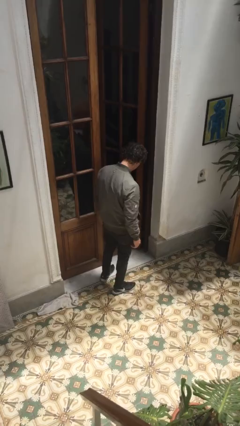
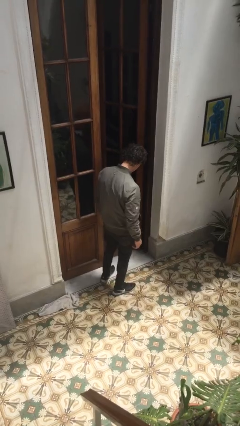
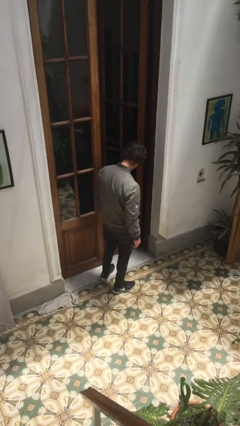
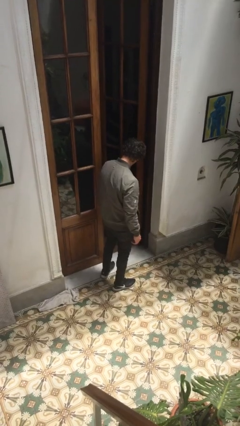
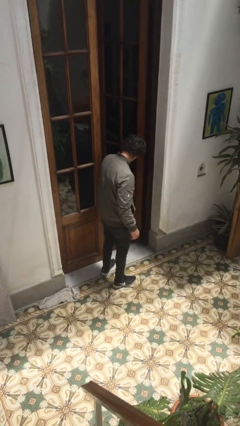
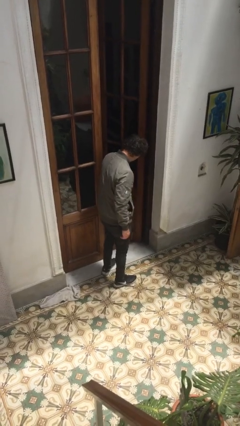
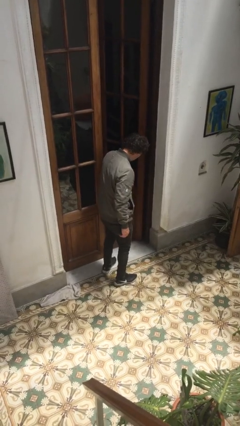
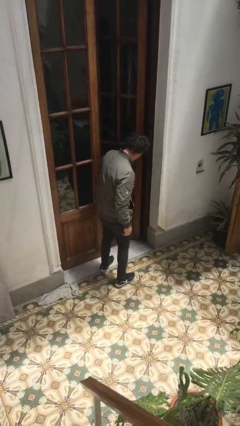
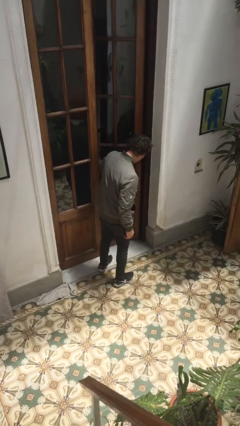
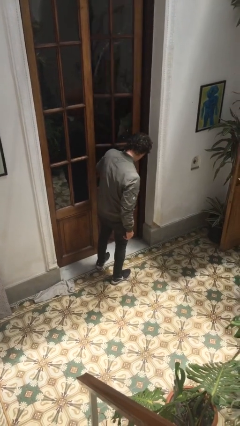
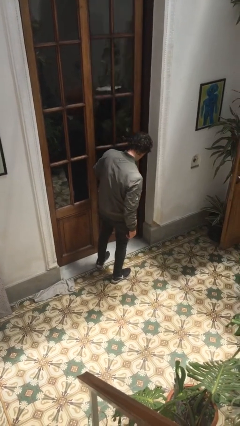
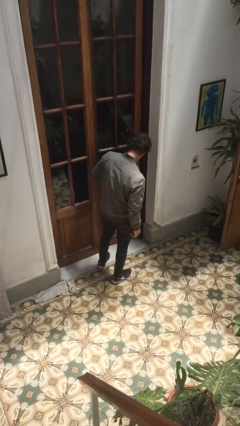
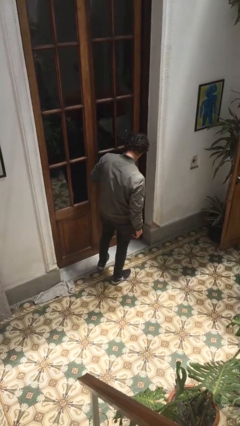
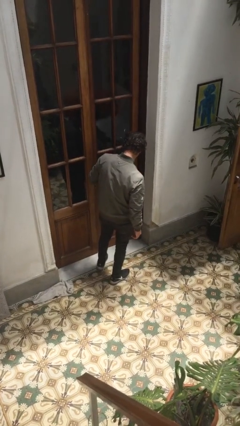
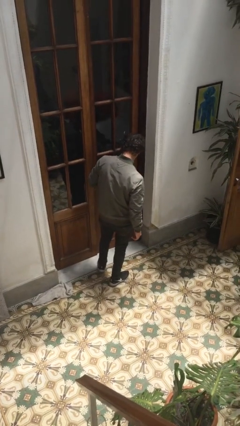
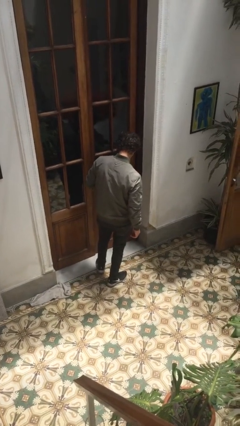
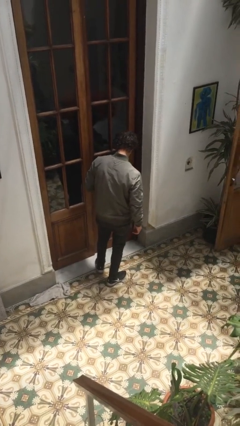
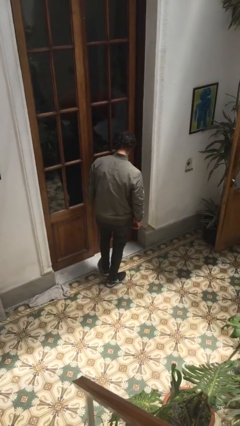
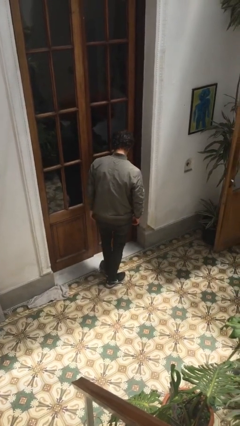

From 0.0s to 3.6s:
person closes facility door

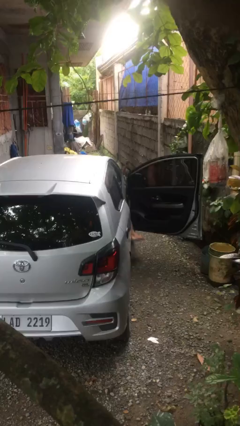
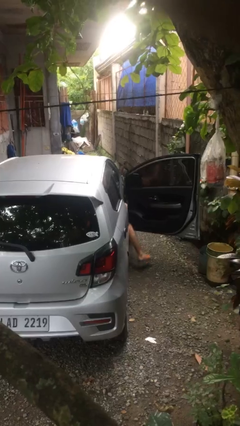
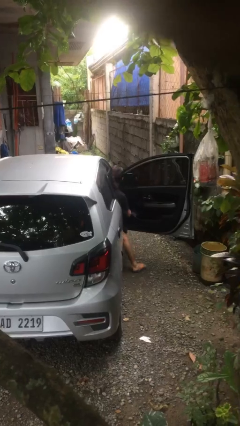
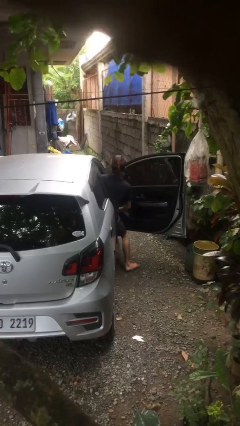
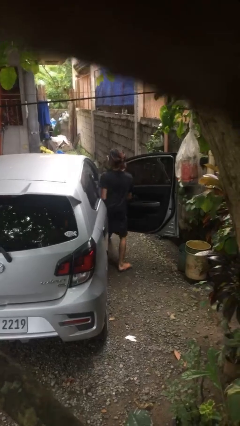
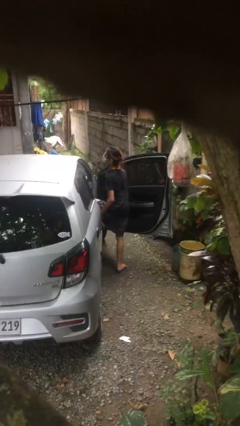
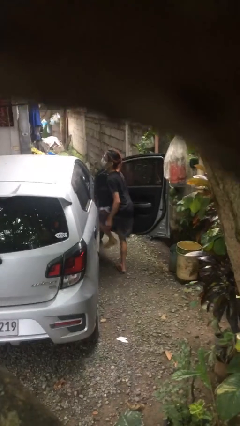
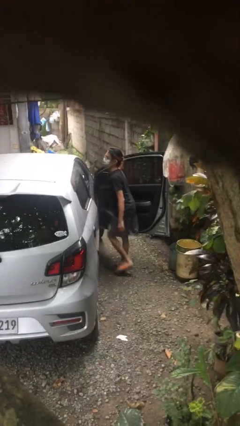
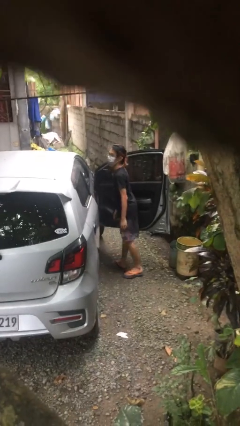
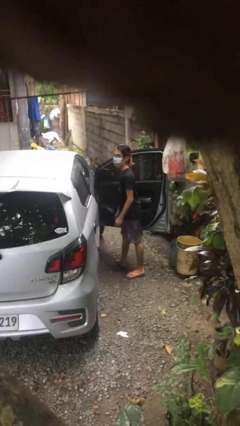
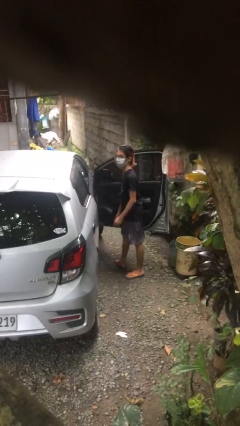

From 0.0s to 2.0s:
person exits car

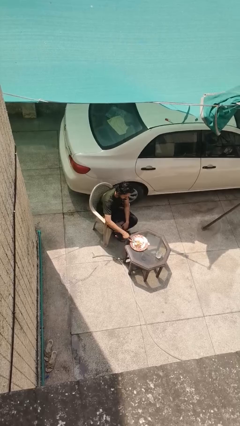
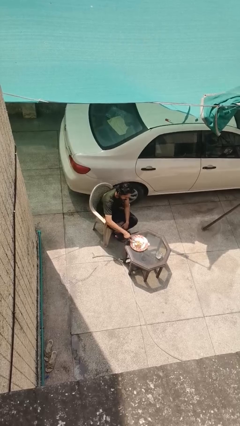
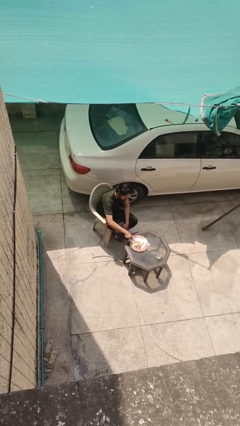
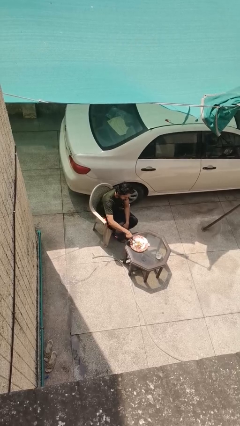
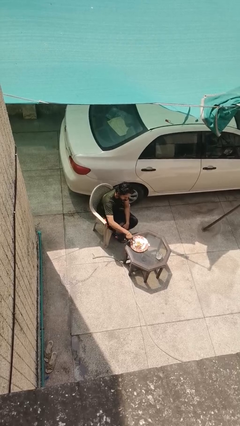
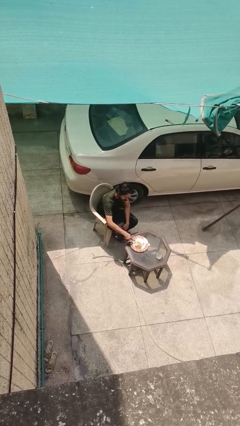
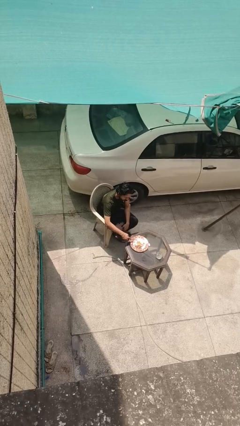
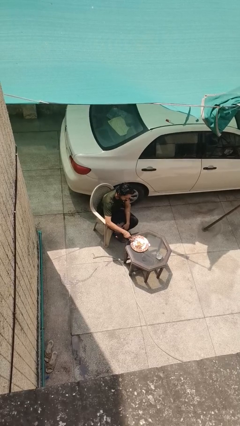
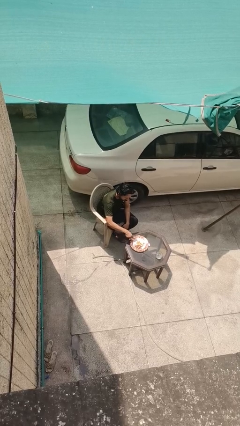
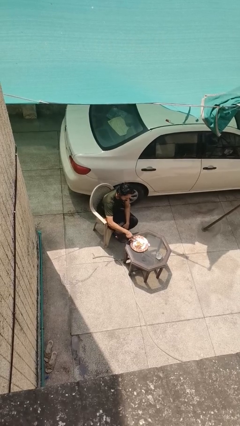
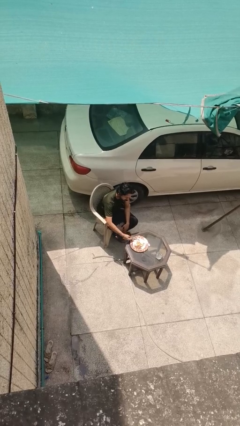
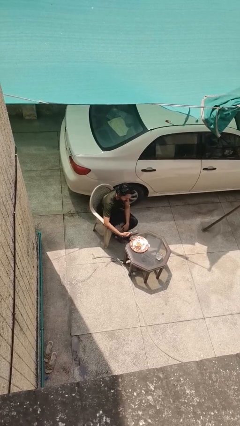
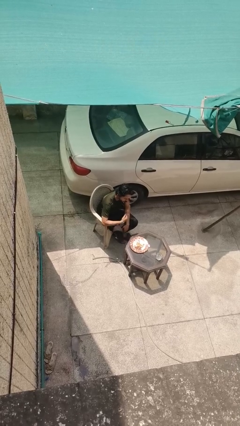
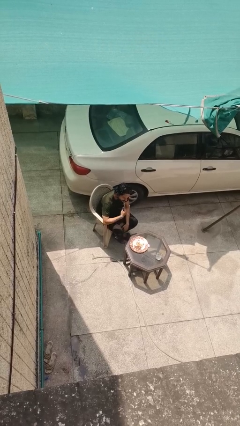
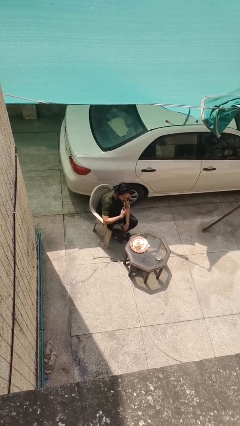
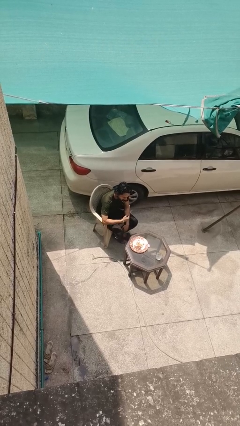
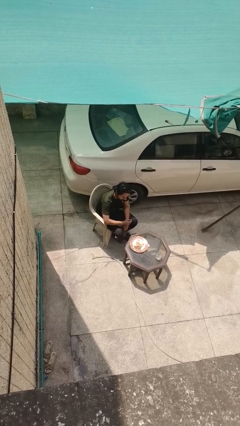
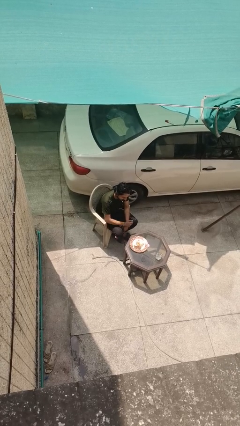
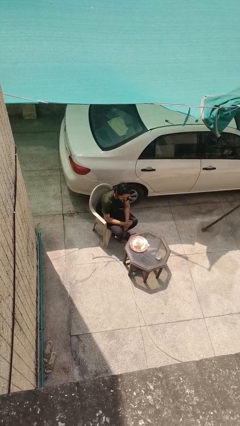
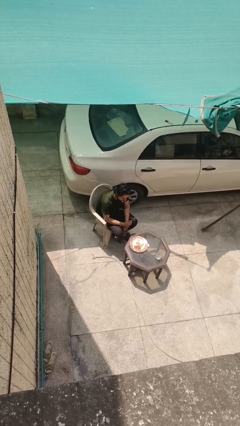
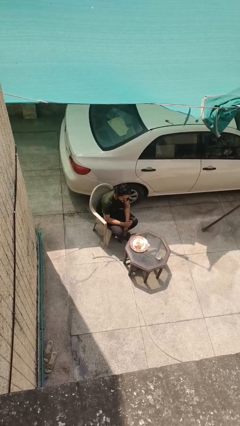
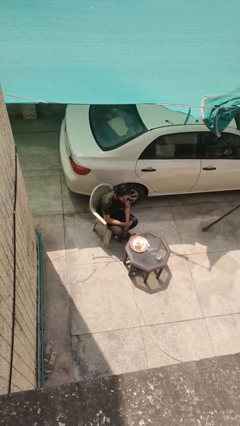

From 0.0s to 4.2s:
person eats with utensil

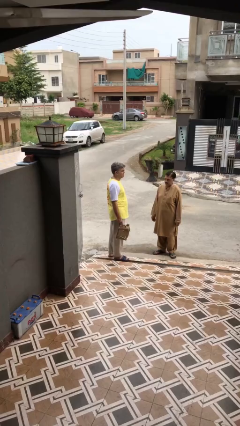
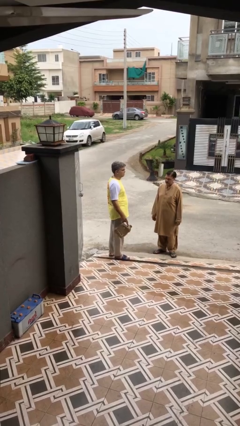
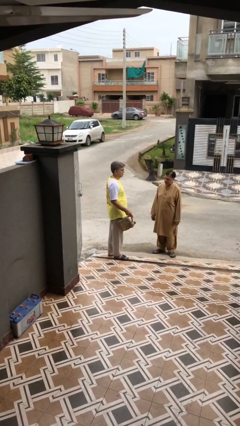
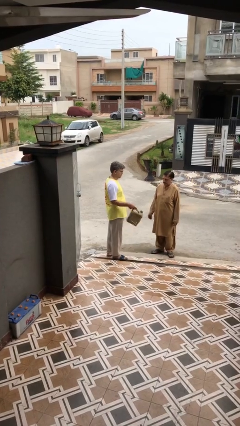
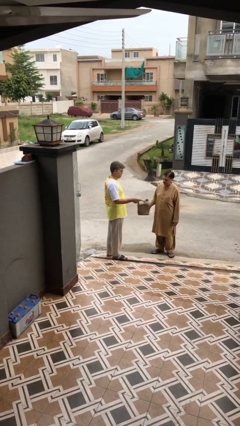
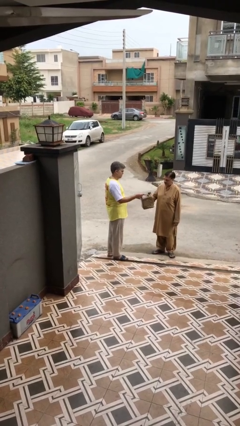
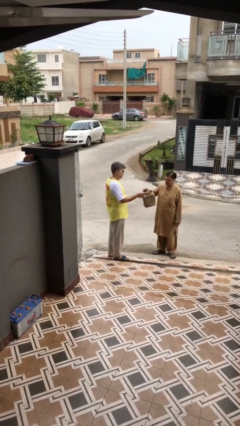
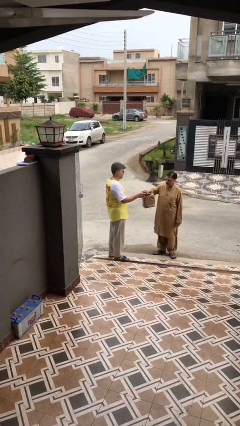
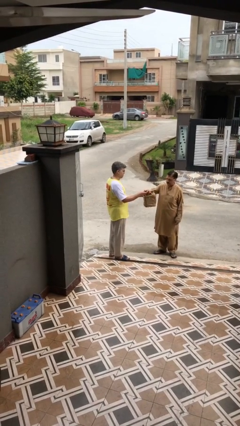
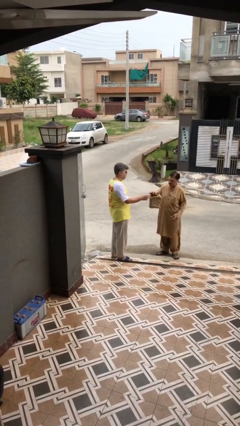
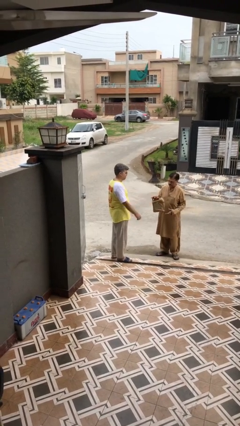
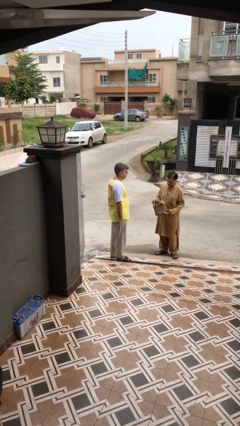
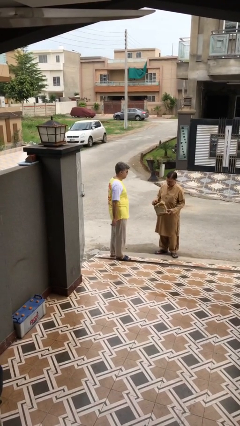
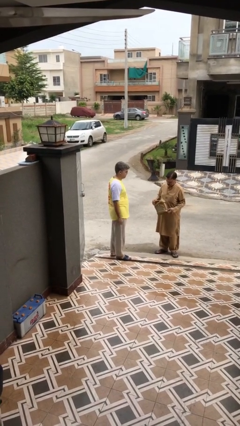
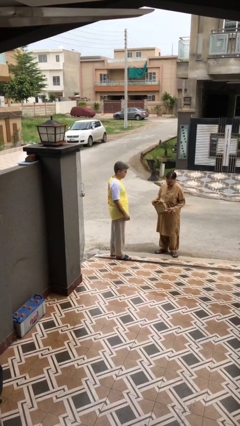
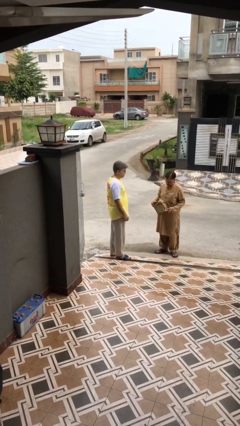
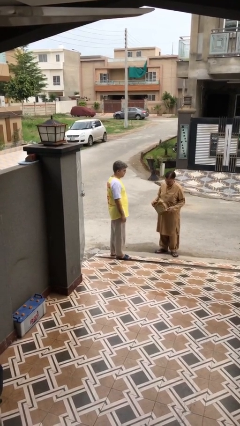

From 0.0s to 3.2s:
person transfers object to person

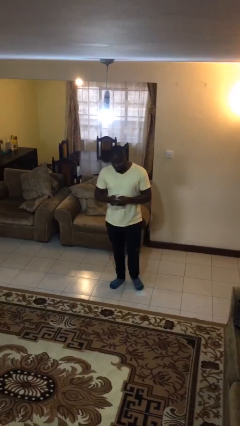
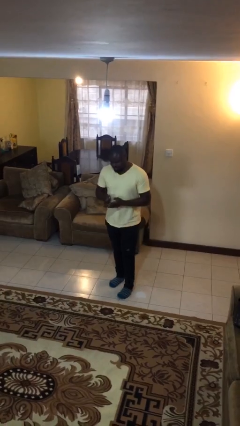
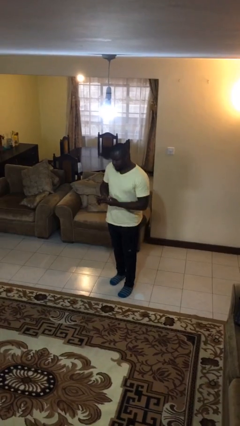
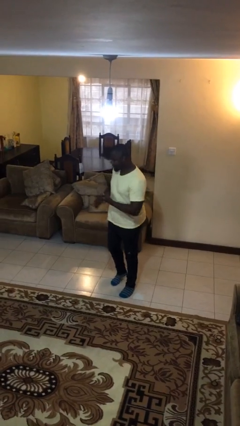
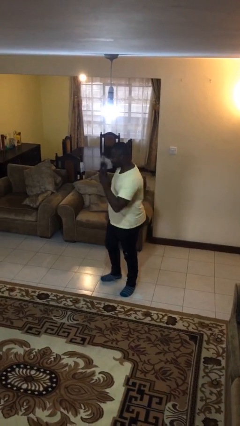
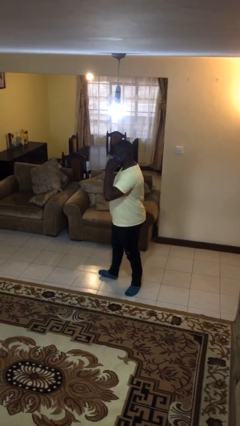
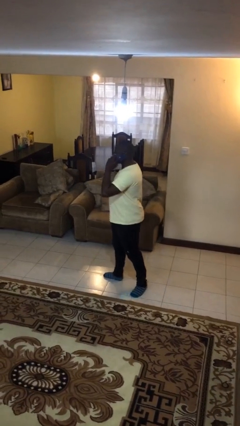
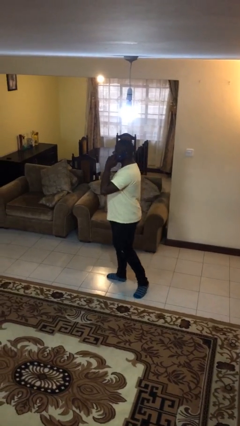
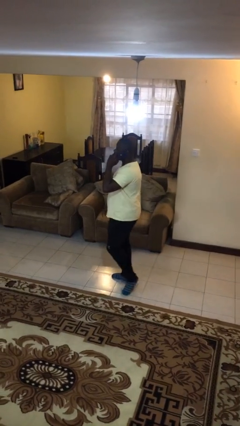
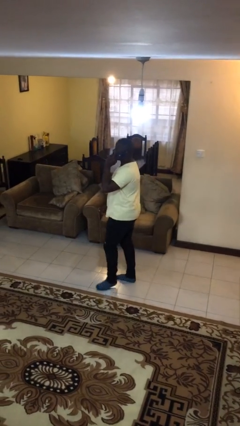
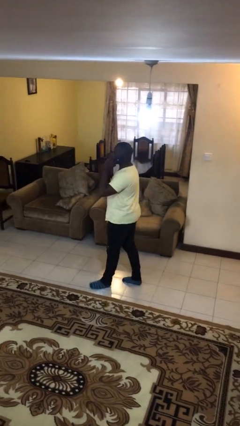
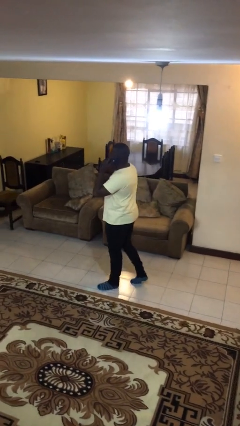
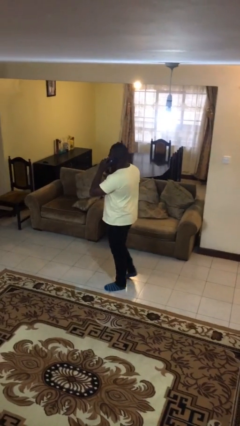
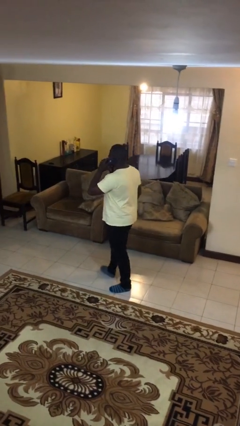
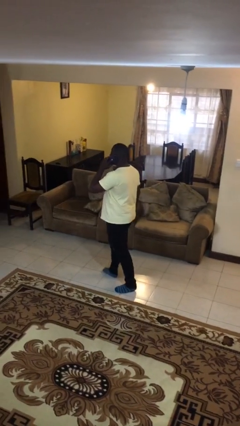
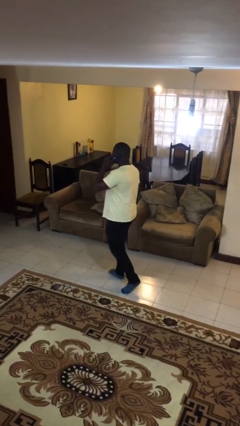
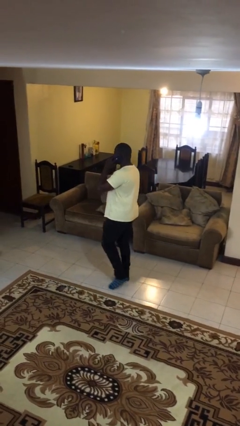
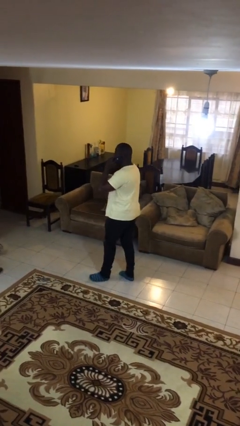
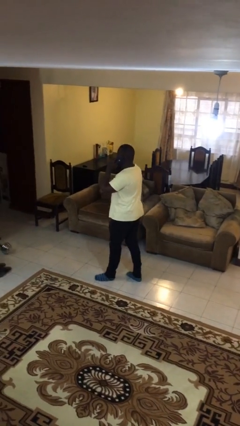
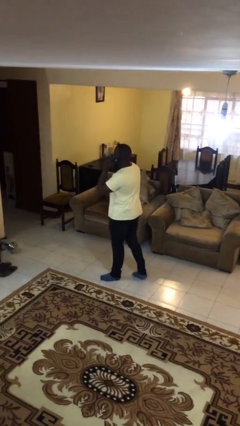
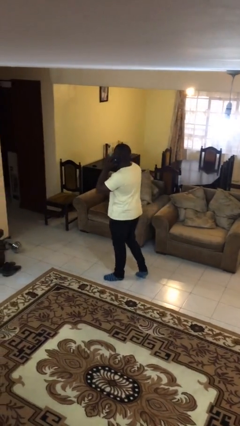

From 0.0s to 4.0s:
person talks on phone

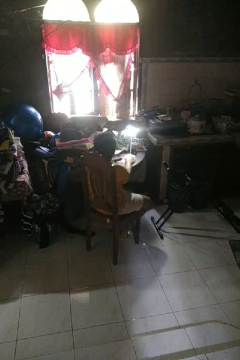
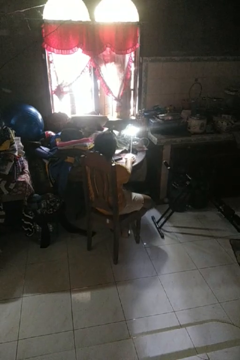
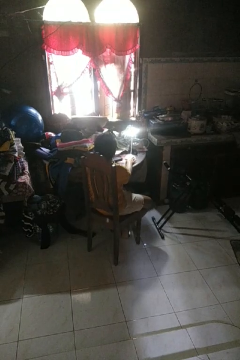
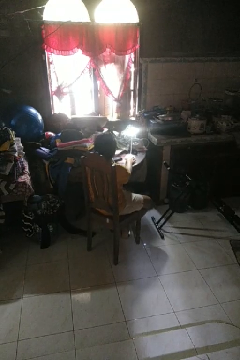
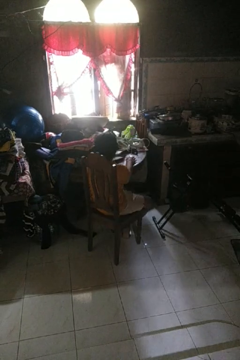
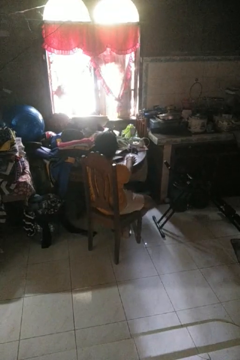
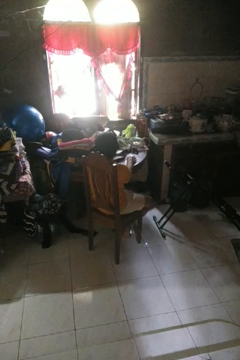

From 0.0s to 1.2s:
person turns off lamp
